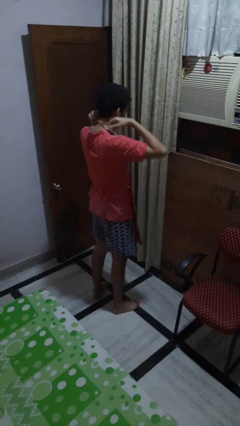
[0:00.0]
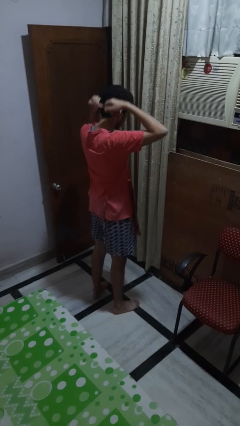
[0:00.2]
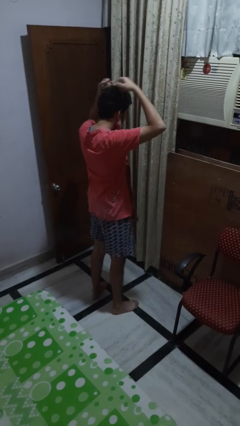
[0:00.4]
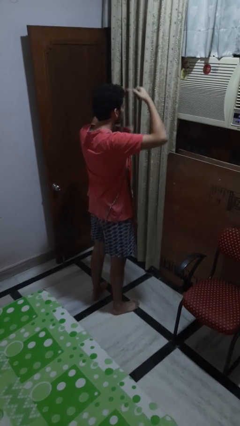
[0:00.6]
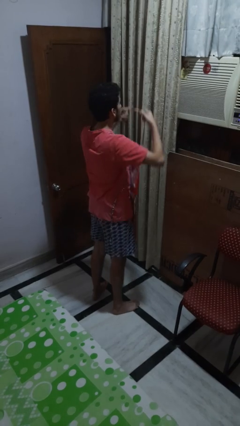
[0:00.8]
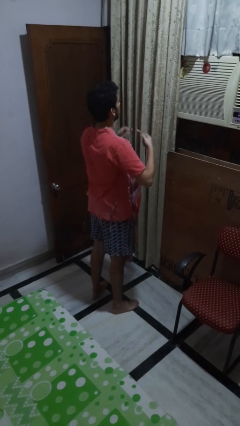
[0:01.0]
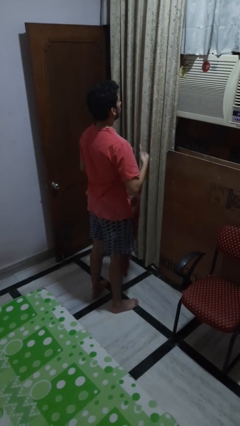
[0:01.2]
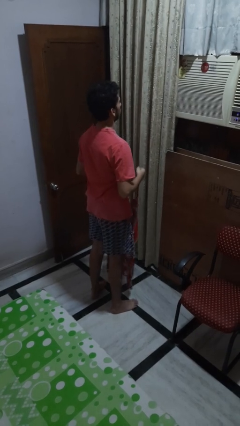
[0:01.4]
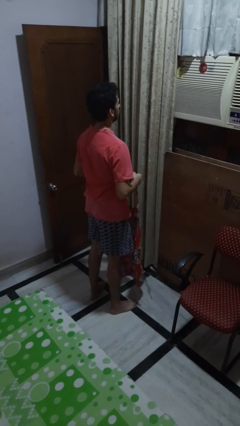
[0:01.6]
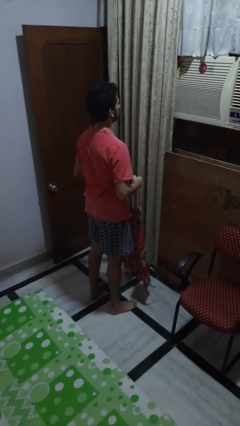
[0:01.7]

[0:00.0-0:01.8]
person takes off apron

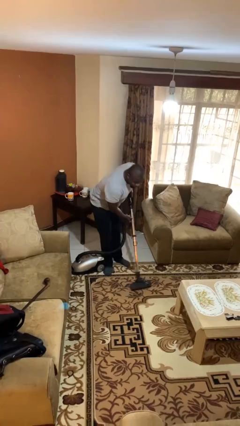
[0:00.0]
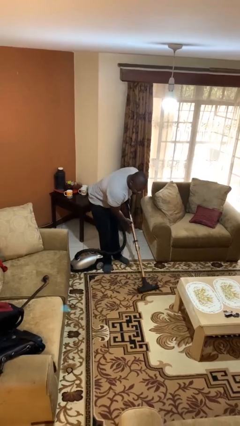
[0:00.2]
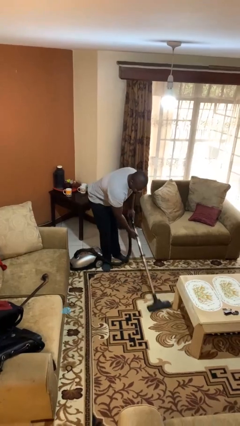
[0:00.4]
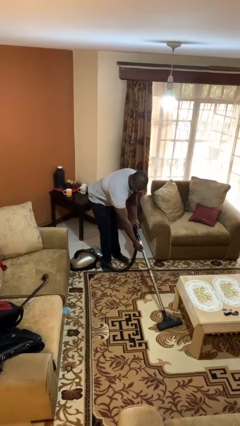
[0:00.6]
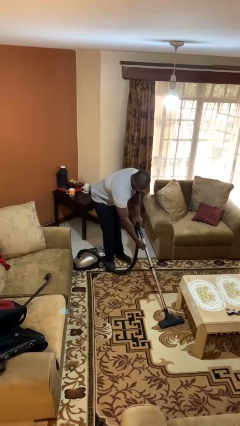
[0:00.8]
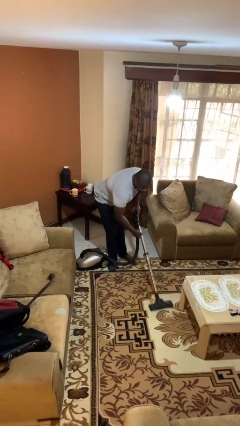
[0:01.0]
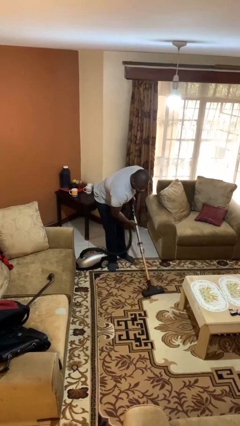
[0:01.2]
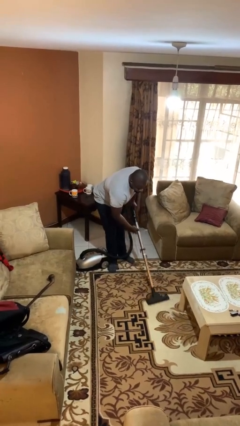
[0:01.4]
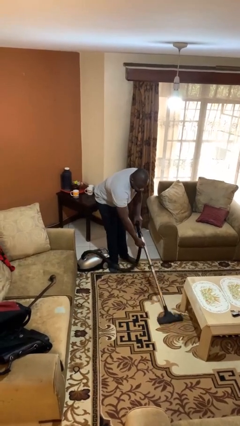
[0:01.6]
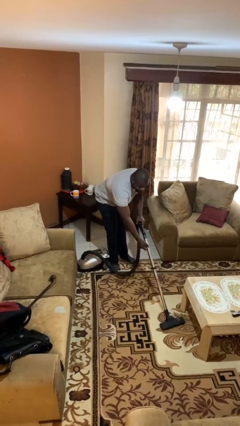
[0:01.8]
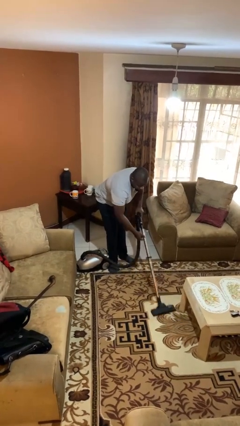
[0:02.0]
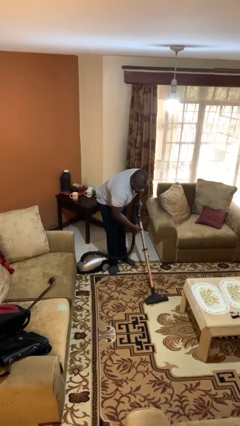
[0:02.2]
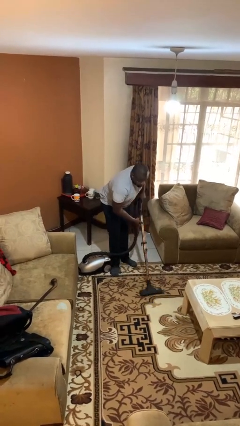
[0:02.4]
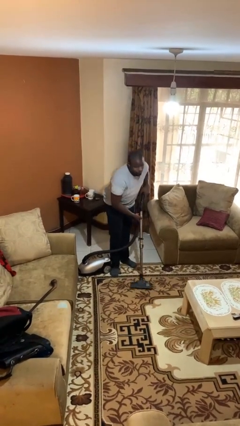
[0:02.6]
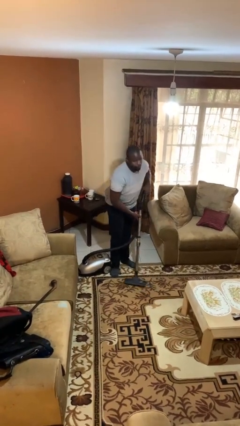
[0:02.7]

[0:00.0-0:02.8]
person vacuums carpet

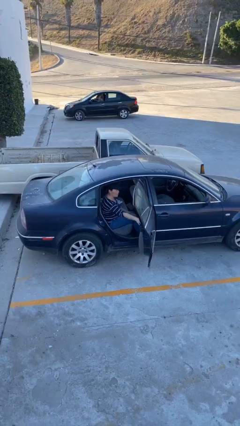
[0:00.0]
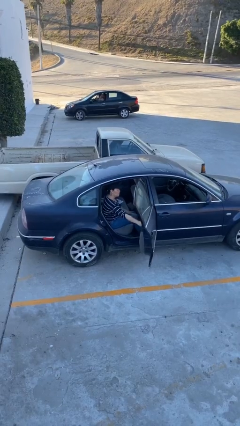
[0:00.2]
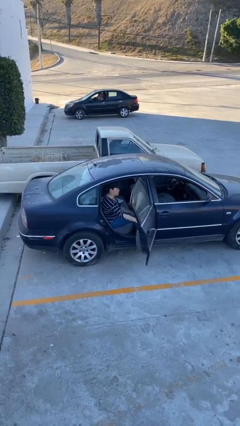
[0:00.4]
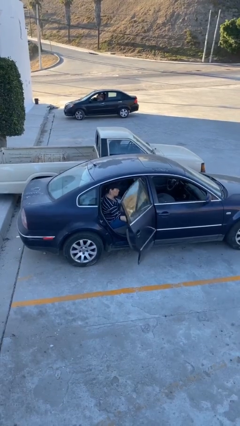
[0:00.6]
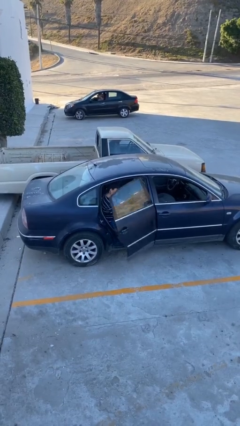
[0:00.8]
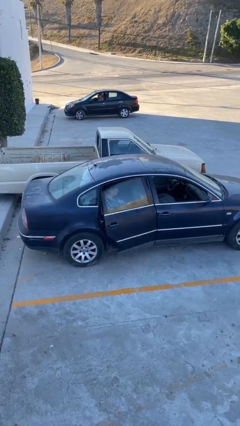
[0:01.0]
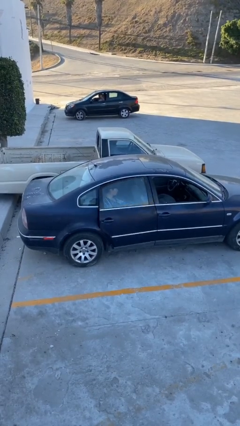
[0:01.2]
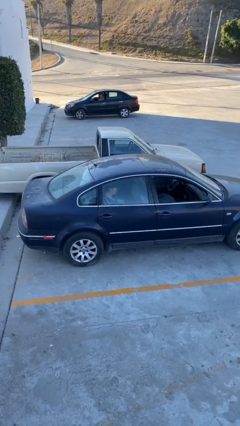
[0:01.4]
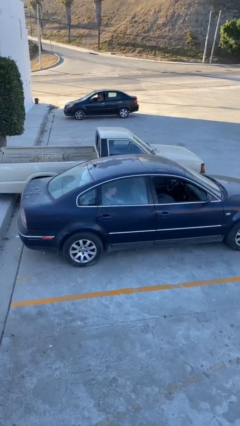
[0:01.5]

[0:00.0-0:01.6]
person closes car door

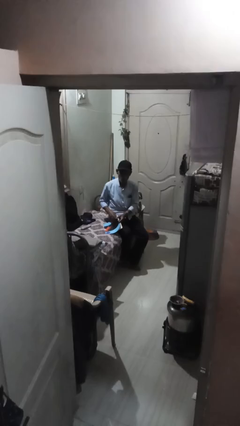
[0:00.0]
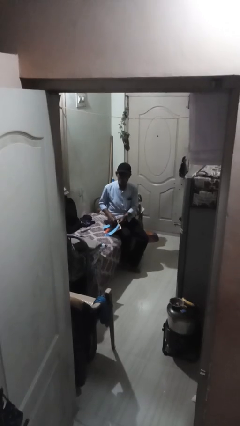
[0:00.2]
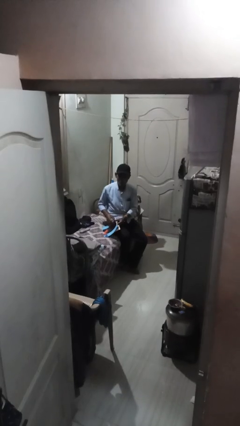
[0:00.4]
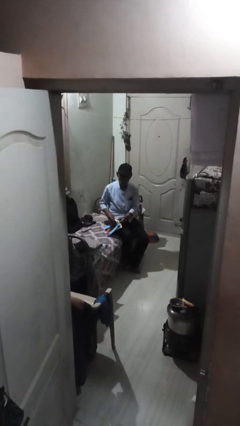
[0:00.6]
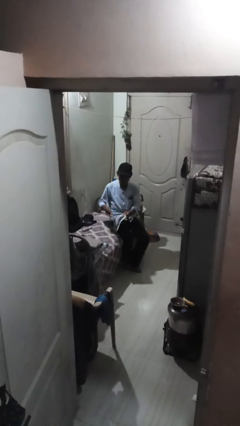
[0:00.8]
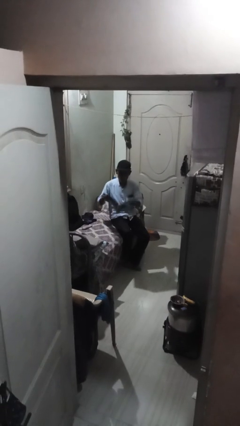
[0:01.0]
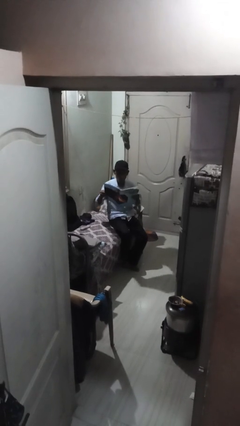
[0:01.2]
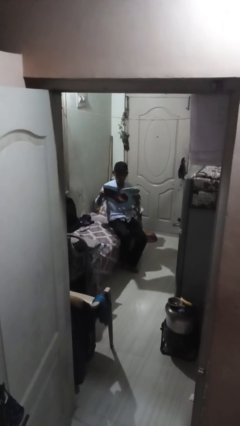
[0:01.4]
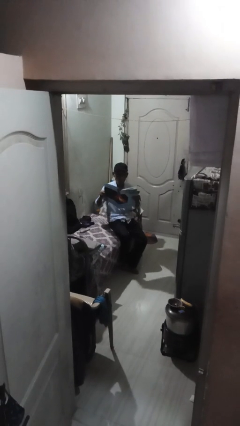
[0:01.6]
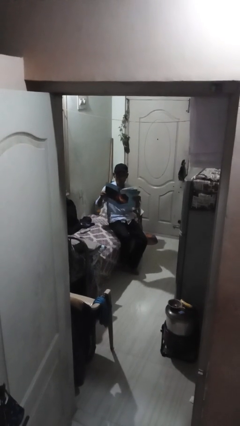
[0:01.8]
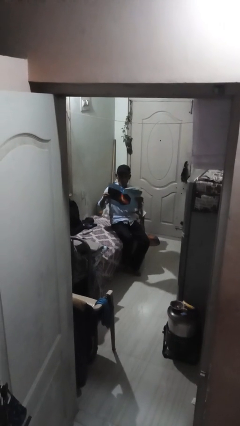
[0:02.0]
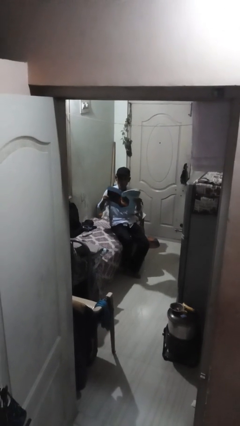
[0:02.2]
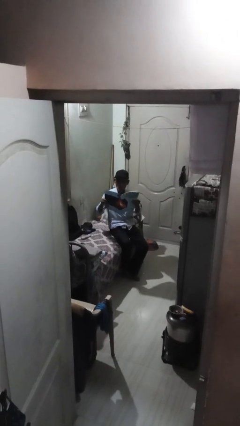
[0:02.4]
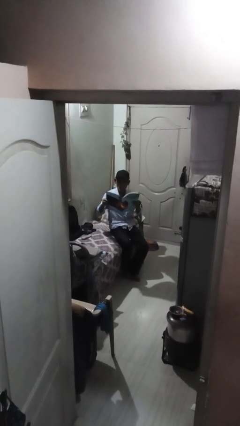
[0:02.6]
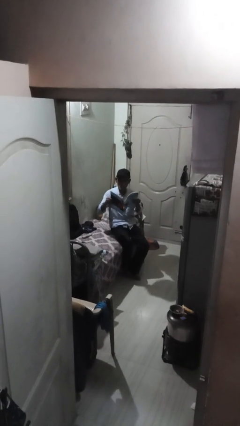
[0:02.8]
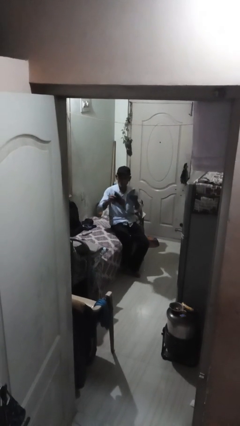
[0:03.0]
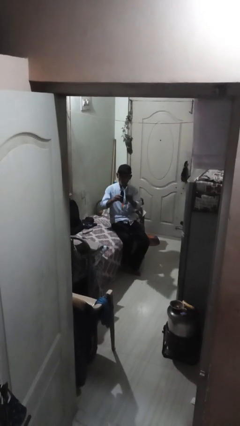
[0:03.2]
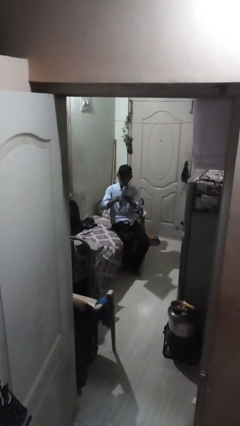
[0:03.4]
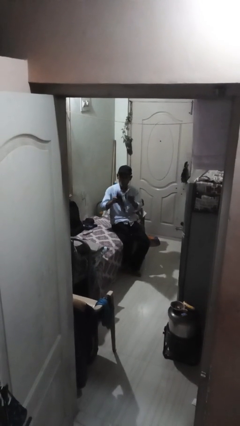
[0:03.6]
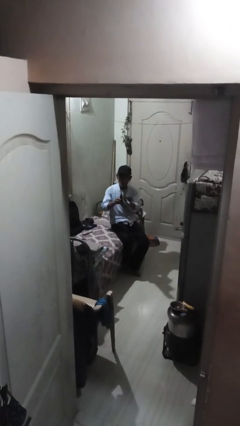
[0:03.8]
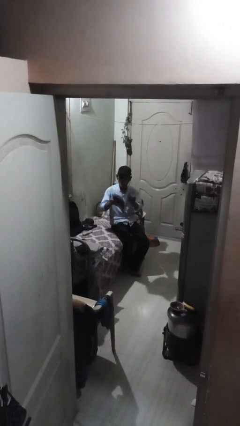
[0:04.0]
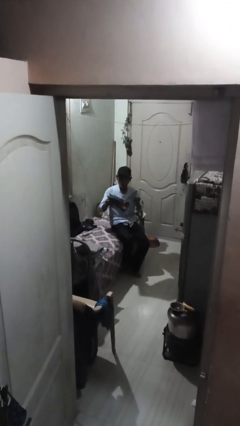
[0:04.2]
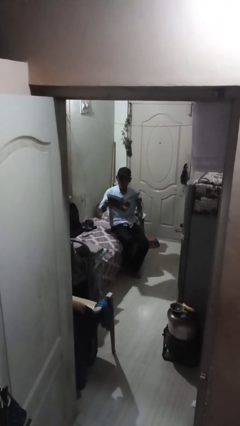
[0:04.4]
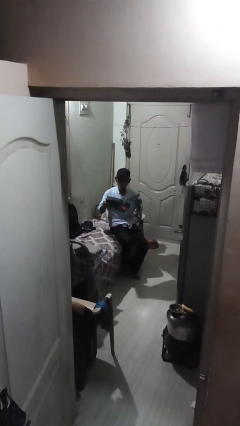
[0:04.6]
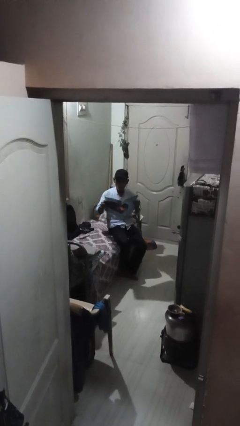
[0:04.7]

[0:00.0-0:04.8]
person reads magazine

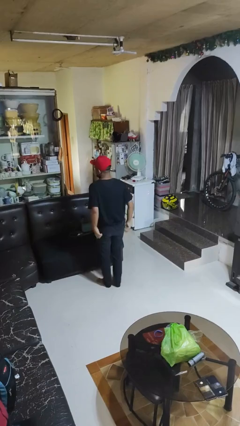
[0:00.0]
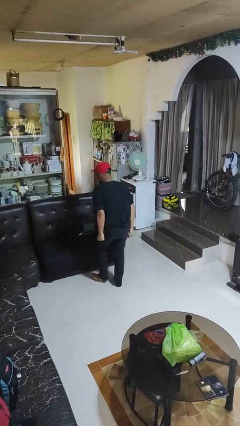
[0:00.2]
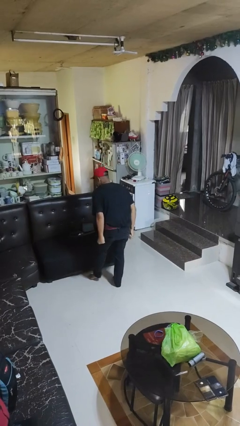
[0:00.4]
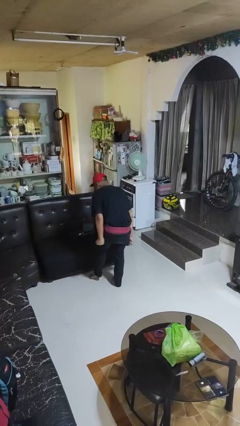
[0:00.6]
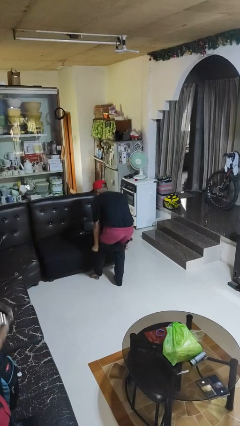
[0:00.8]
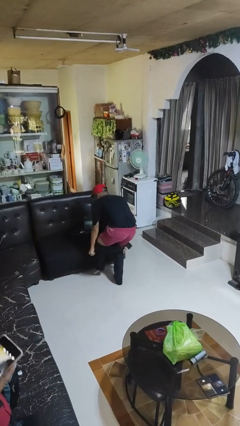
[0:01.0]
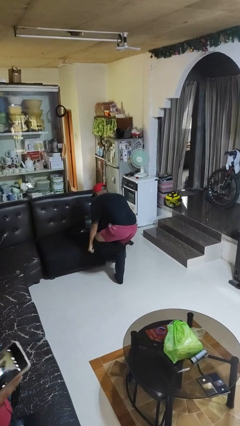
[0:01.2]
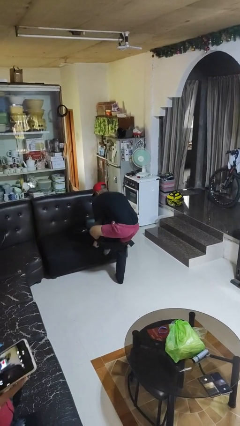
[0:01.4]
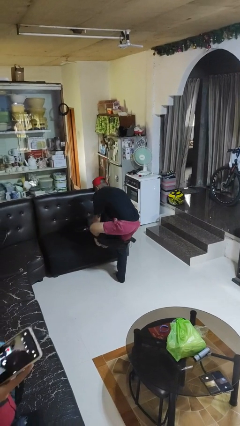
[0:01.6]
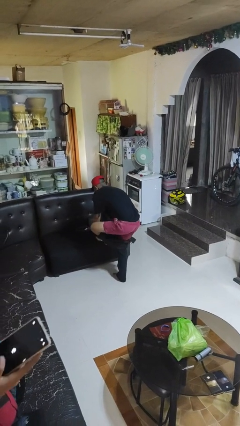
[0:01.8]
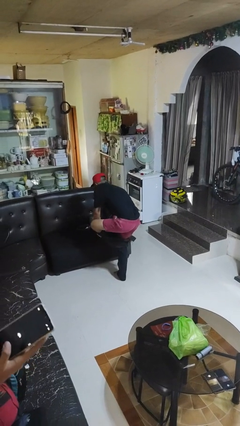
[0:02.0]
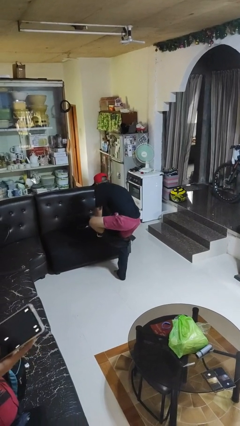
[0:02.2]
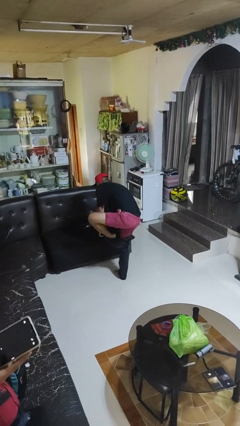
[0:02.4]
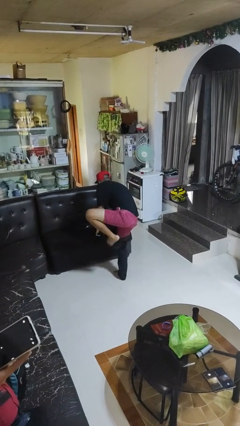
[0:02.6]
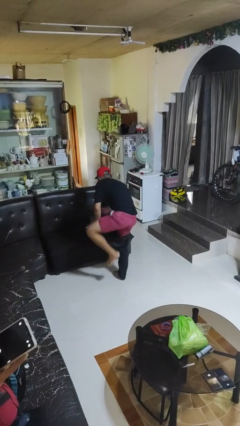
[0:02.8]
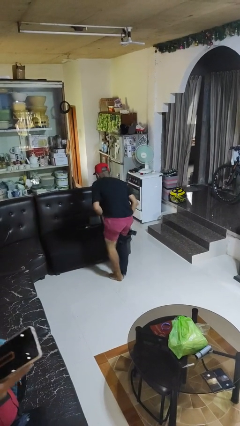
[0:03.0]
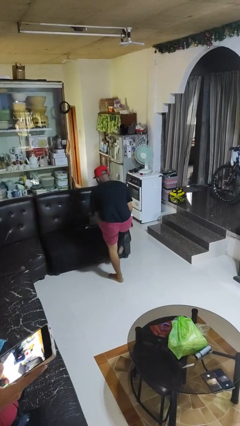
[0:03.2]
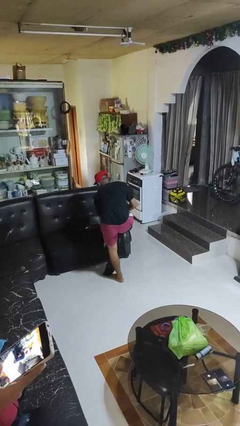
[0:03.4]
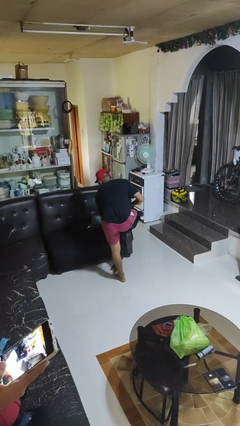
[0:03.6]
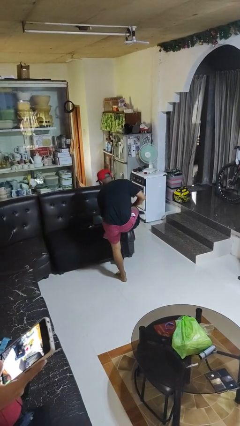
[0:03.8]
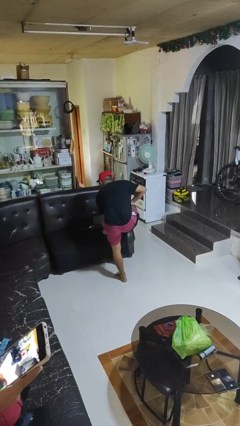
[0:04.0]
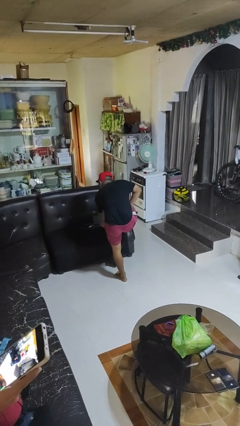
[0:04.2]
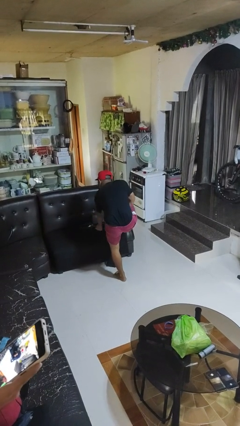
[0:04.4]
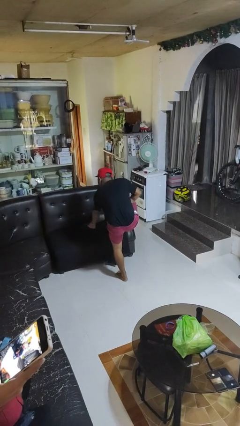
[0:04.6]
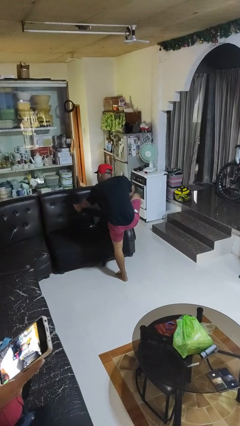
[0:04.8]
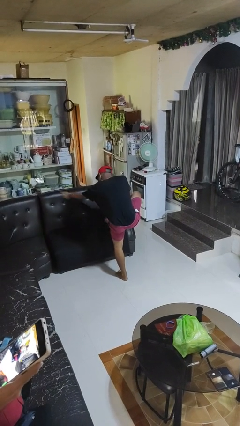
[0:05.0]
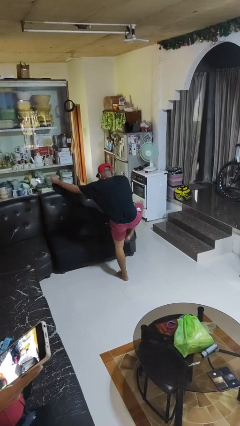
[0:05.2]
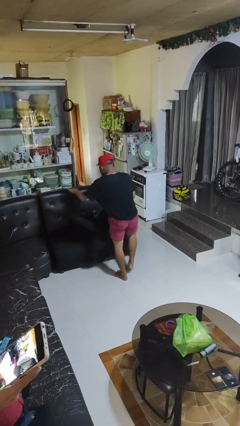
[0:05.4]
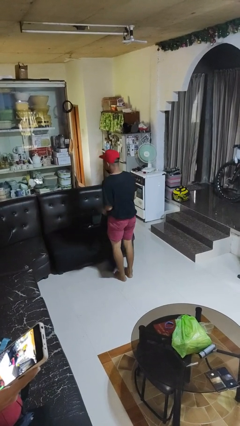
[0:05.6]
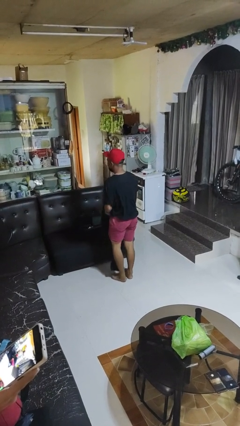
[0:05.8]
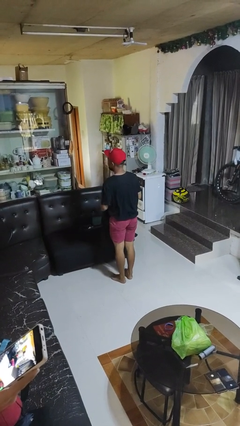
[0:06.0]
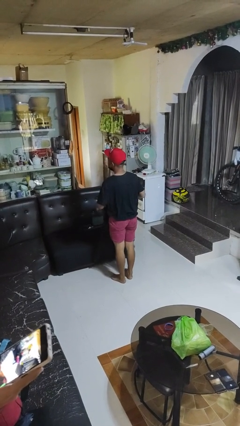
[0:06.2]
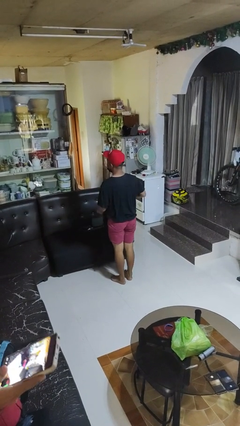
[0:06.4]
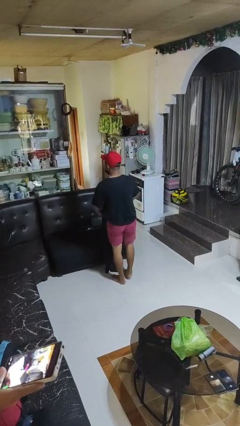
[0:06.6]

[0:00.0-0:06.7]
person takes off pants
